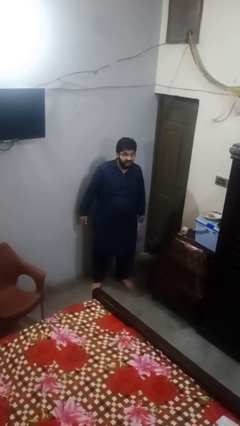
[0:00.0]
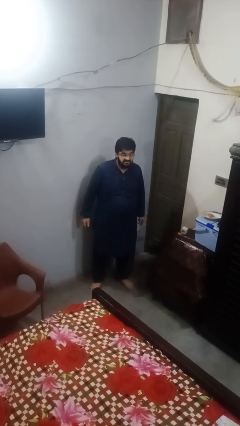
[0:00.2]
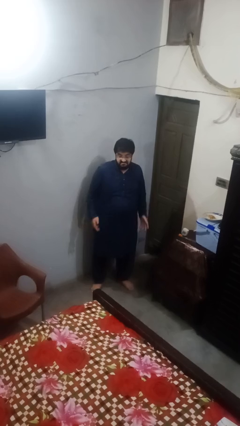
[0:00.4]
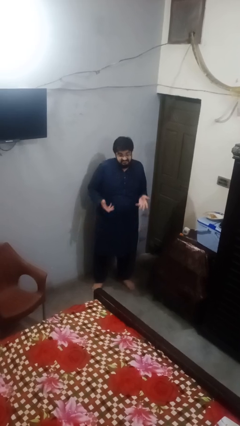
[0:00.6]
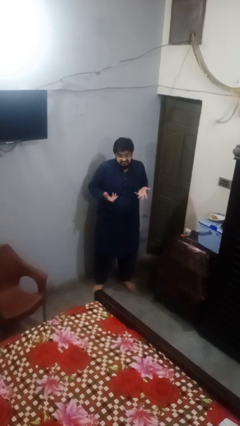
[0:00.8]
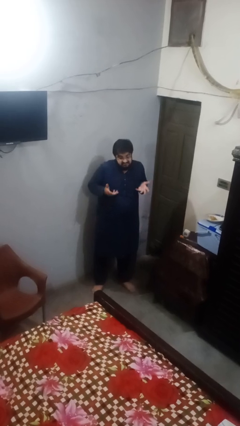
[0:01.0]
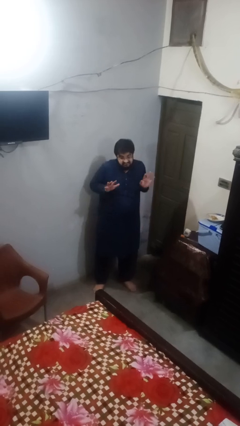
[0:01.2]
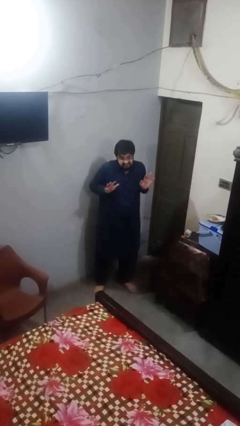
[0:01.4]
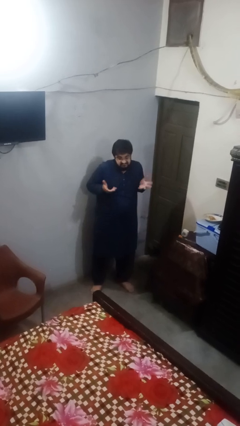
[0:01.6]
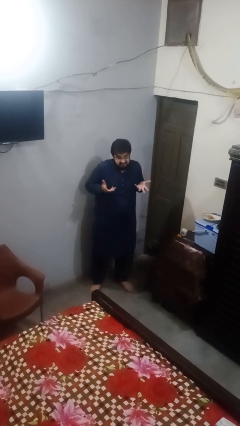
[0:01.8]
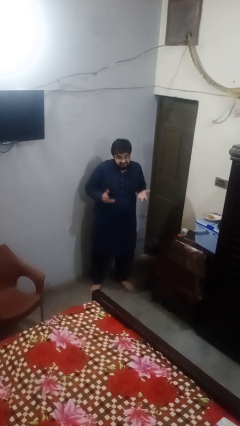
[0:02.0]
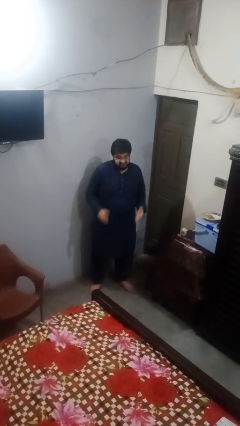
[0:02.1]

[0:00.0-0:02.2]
person shrugs

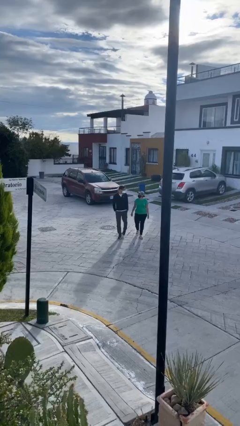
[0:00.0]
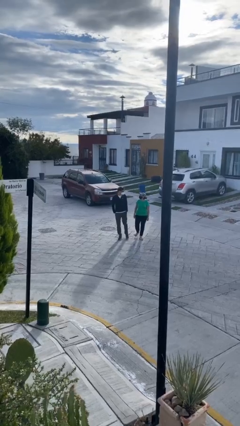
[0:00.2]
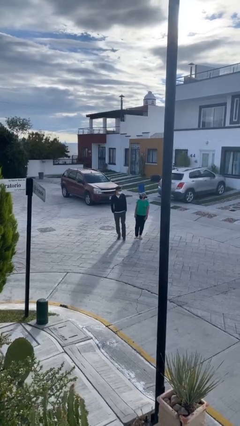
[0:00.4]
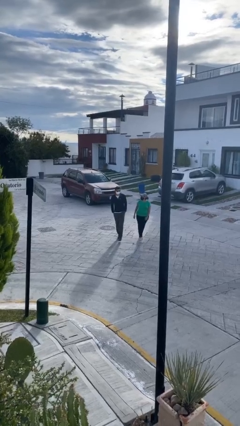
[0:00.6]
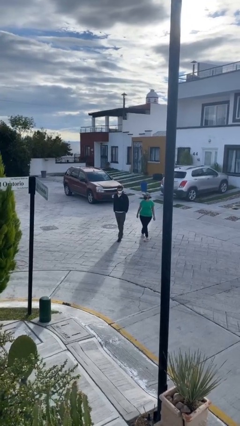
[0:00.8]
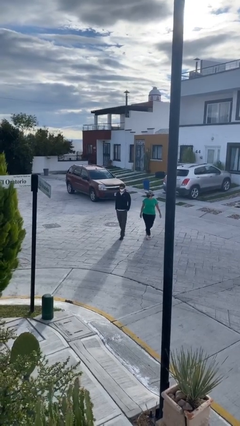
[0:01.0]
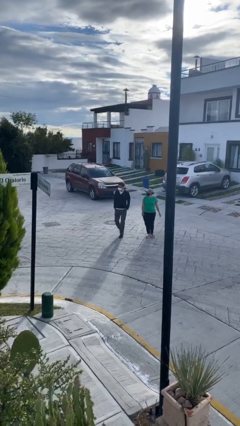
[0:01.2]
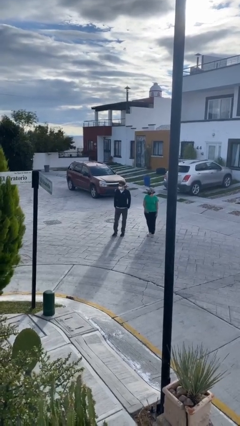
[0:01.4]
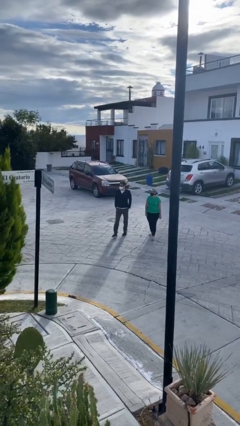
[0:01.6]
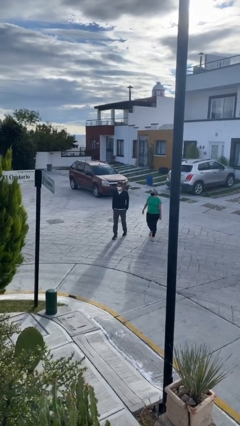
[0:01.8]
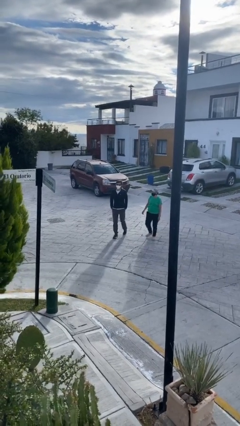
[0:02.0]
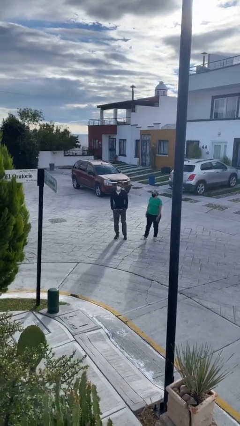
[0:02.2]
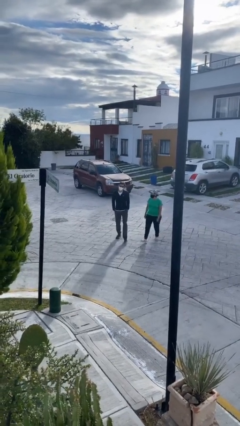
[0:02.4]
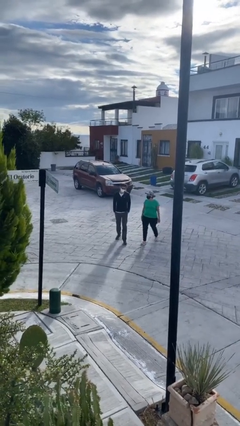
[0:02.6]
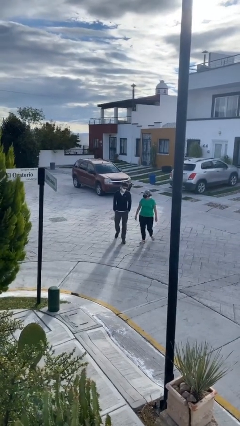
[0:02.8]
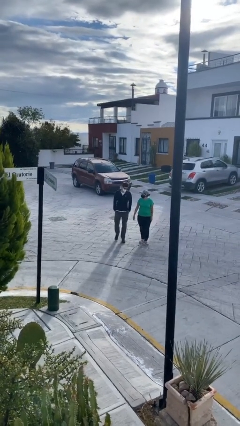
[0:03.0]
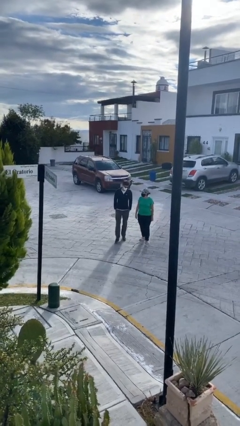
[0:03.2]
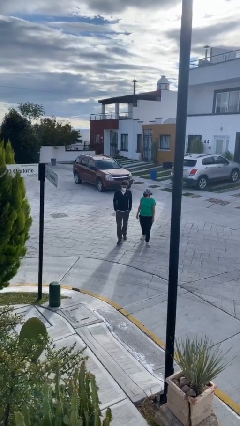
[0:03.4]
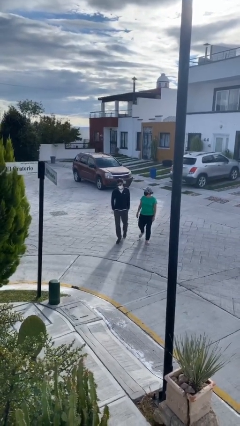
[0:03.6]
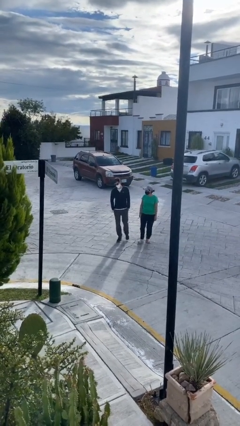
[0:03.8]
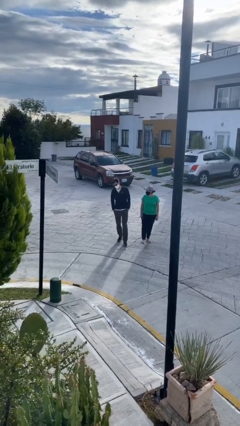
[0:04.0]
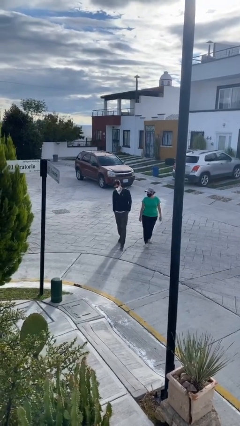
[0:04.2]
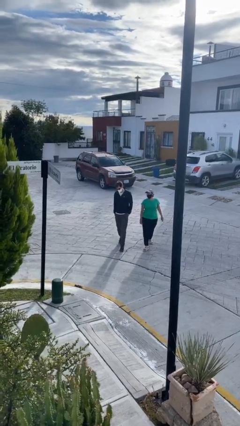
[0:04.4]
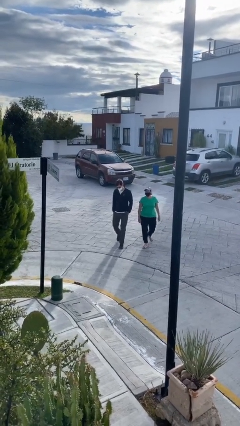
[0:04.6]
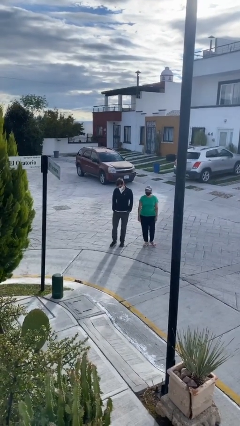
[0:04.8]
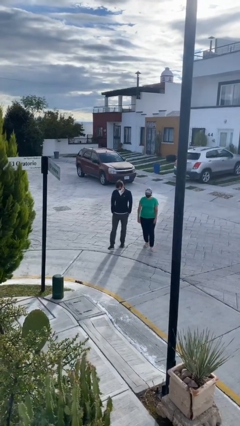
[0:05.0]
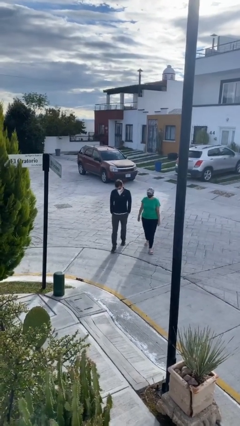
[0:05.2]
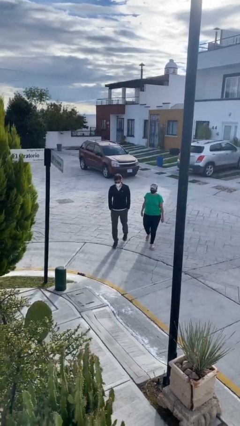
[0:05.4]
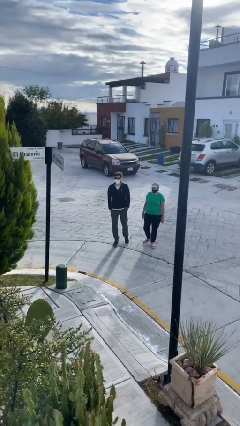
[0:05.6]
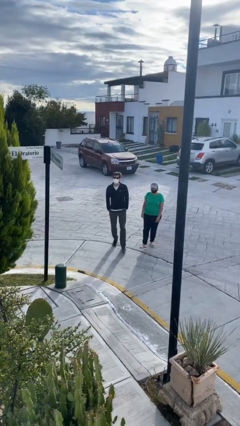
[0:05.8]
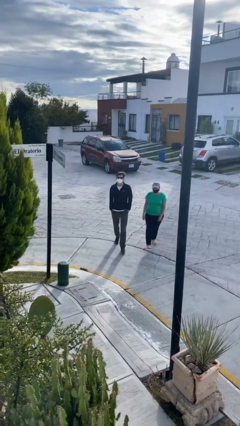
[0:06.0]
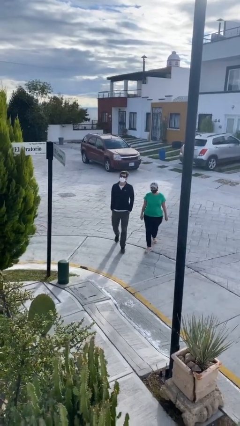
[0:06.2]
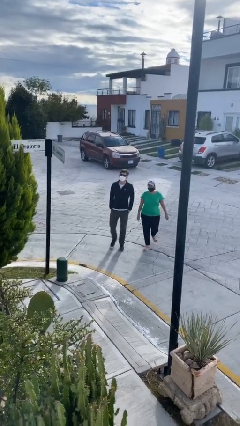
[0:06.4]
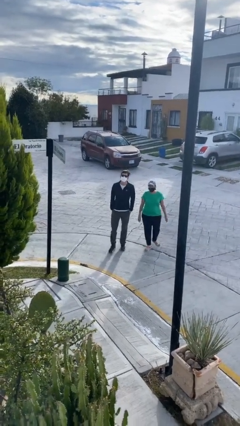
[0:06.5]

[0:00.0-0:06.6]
person talks to person

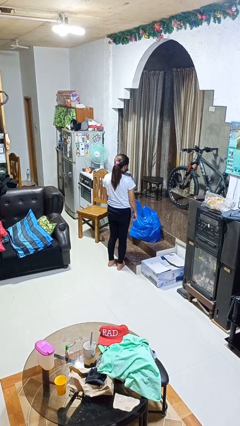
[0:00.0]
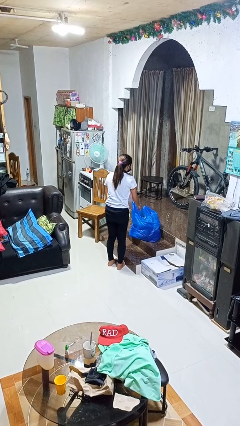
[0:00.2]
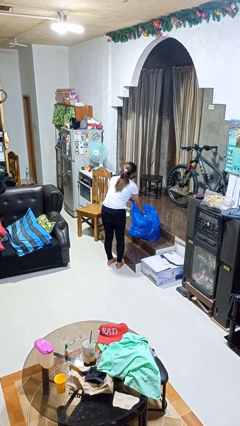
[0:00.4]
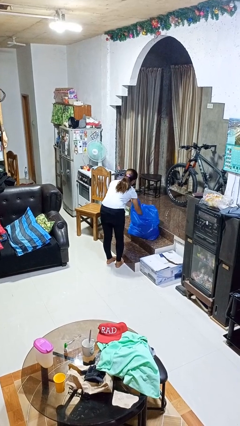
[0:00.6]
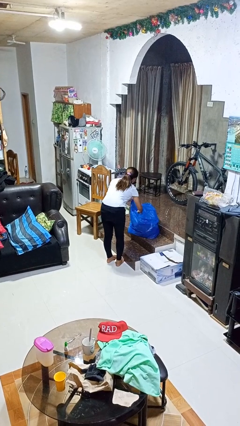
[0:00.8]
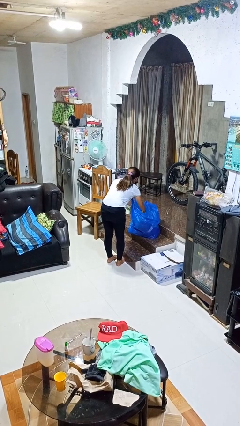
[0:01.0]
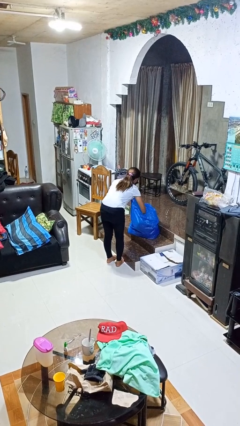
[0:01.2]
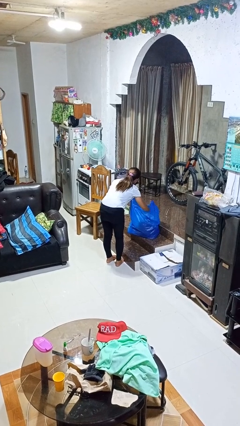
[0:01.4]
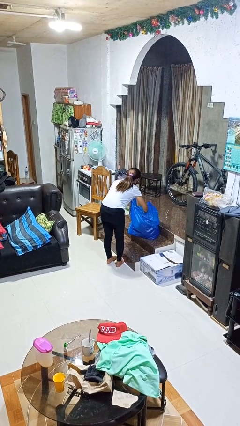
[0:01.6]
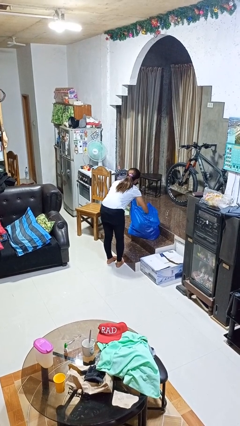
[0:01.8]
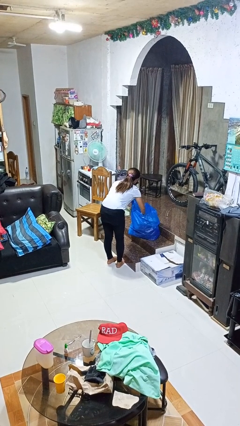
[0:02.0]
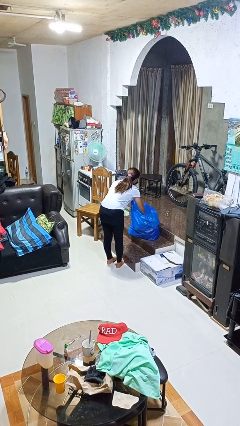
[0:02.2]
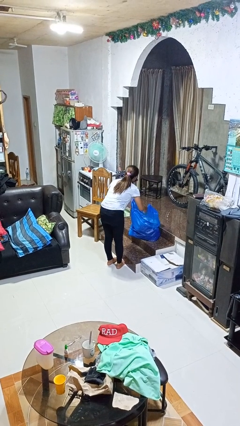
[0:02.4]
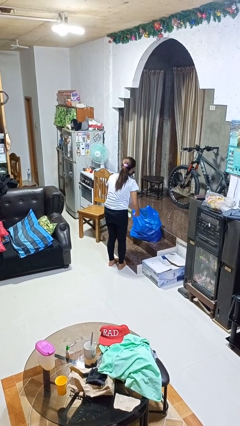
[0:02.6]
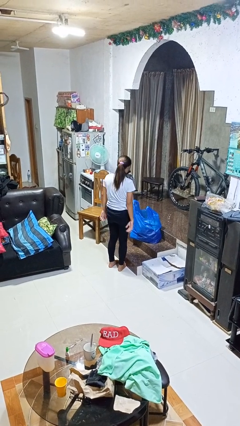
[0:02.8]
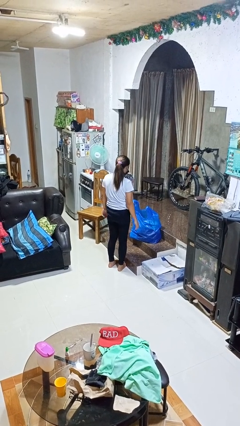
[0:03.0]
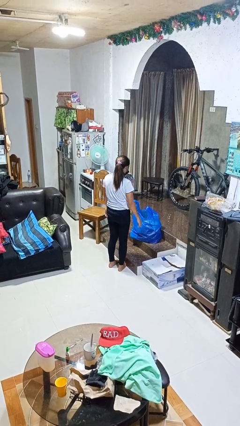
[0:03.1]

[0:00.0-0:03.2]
person searches in bag

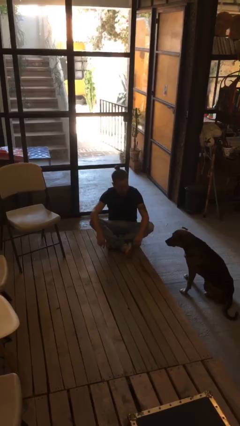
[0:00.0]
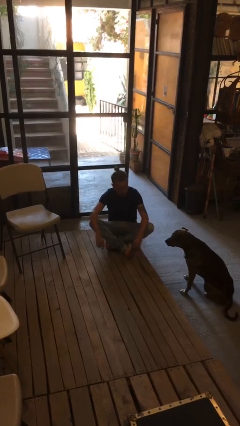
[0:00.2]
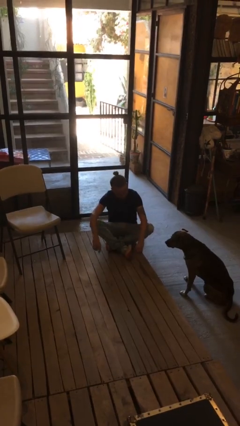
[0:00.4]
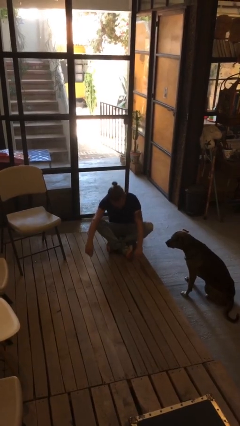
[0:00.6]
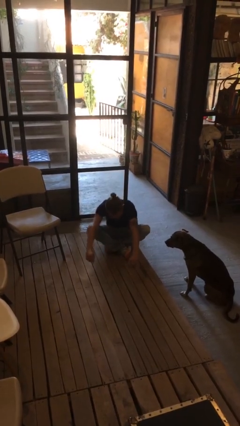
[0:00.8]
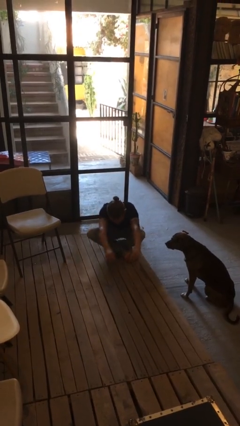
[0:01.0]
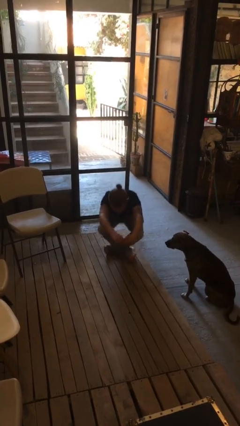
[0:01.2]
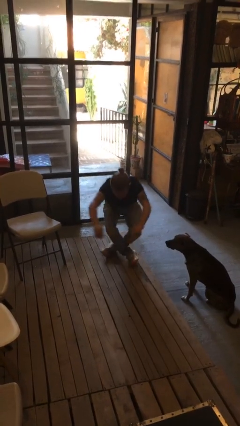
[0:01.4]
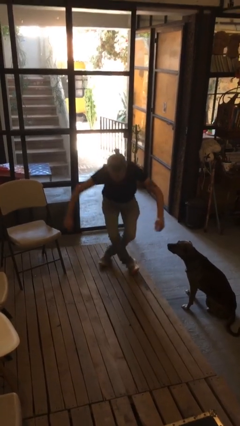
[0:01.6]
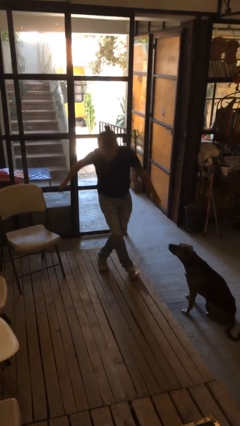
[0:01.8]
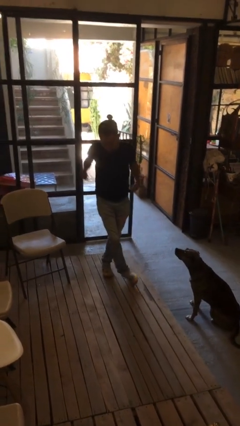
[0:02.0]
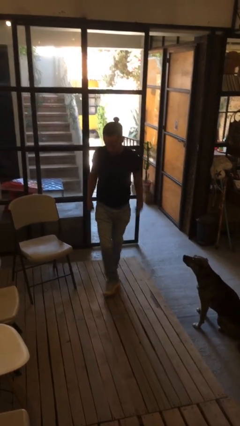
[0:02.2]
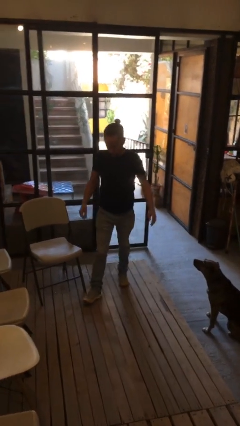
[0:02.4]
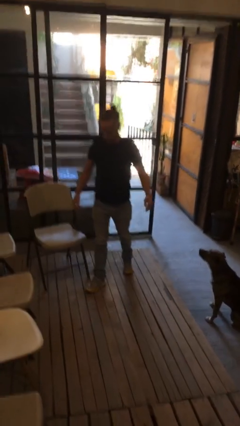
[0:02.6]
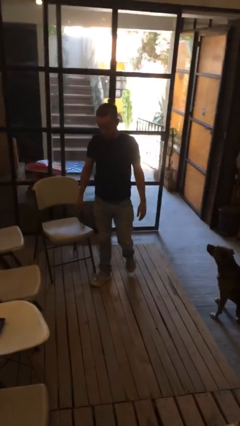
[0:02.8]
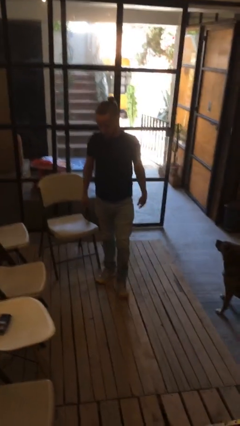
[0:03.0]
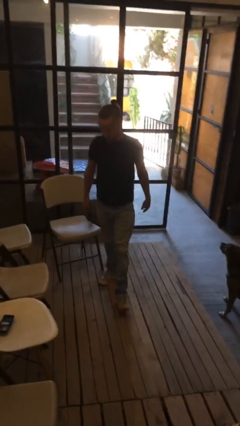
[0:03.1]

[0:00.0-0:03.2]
person stands up from floor

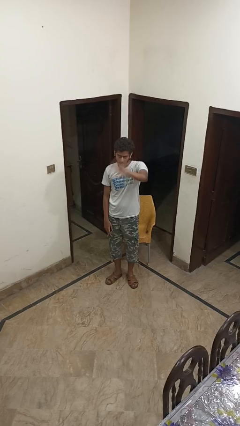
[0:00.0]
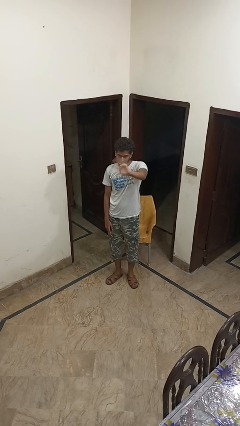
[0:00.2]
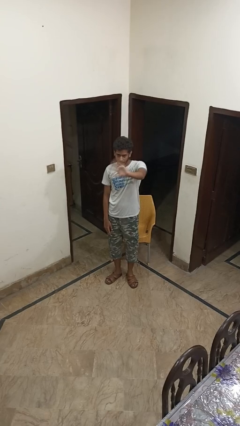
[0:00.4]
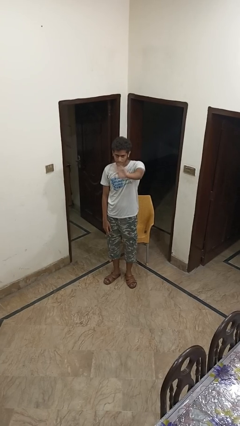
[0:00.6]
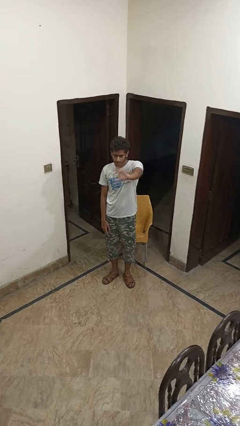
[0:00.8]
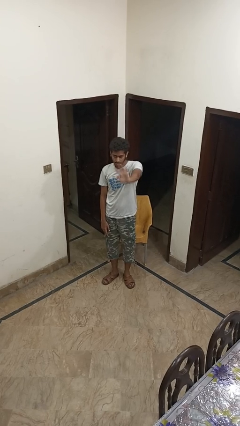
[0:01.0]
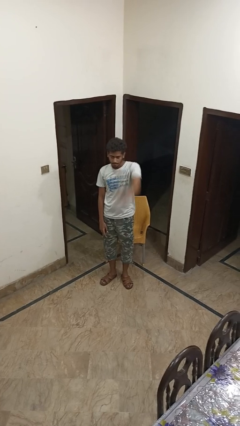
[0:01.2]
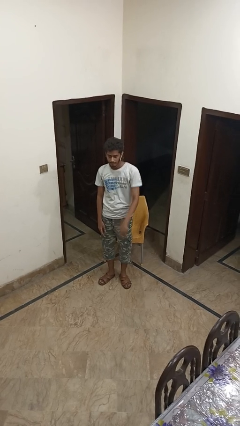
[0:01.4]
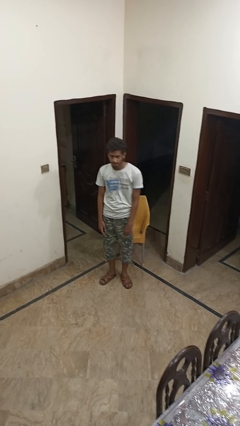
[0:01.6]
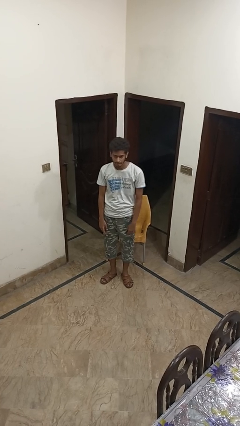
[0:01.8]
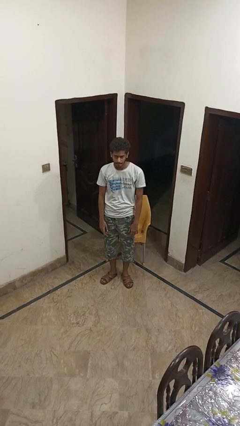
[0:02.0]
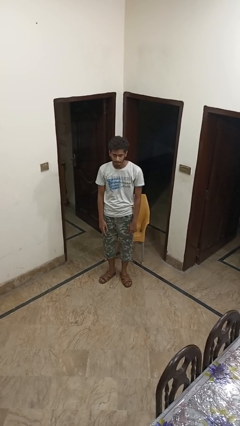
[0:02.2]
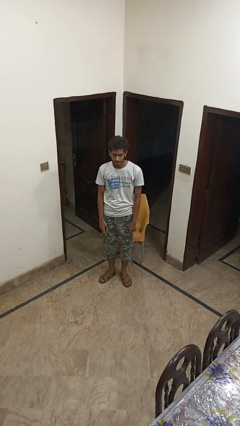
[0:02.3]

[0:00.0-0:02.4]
person waves at person
